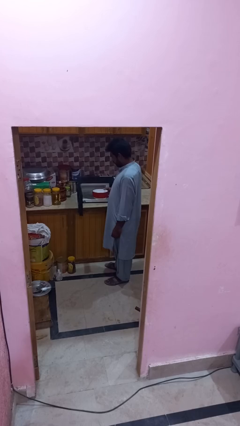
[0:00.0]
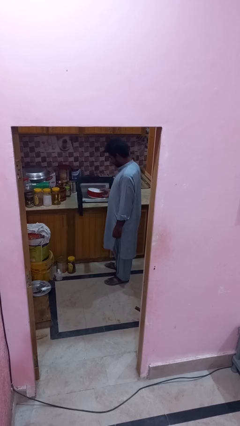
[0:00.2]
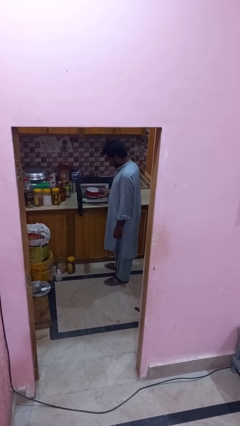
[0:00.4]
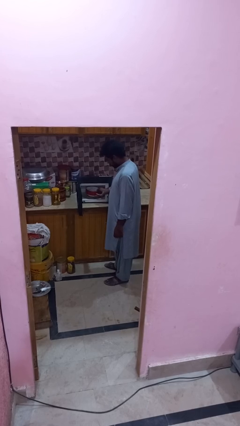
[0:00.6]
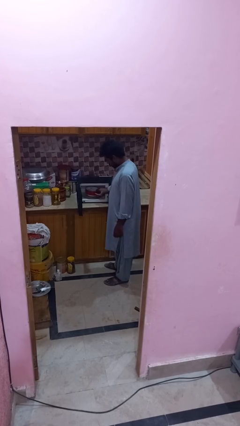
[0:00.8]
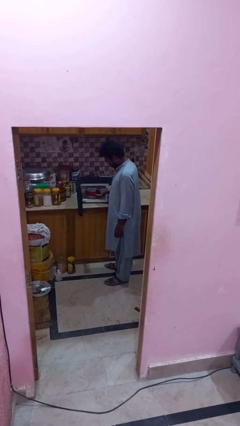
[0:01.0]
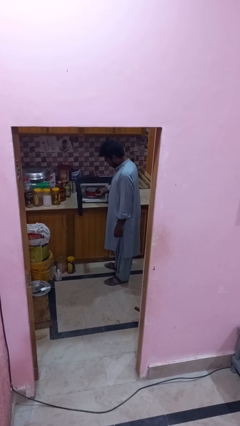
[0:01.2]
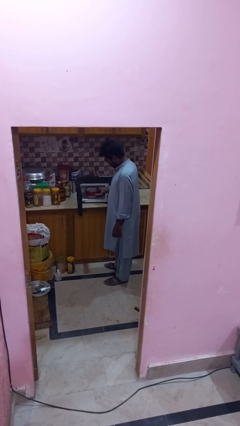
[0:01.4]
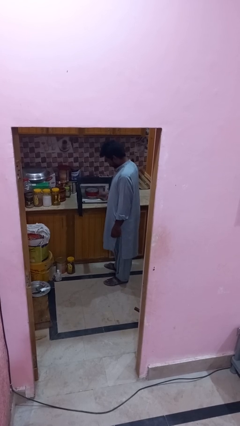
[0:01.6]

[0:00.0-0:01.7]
person puts object into microwave

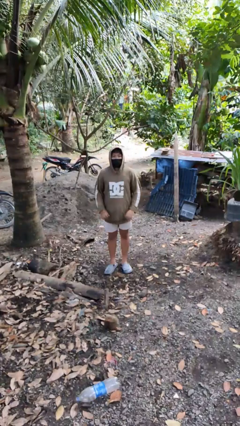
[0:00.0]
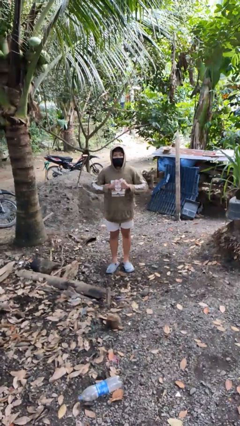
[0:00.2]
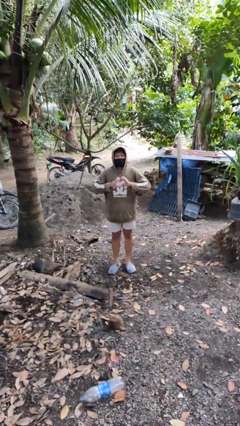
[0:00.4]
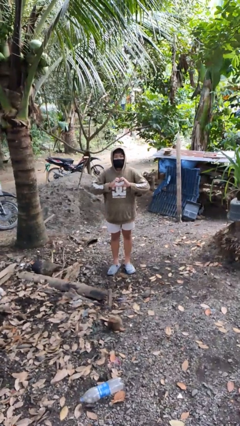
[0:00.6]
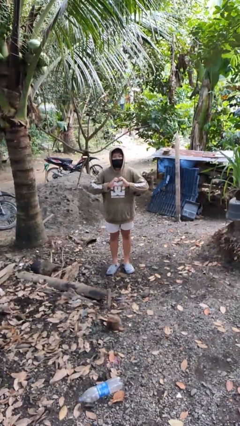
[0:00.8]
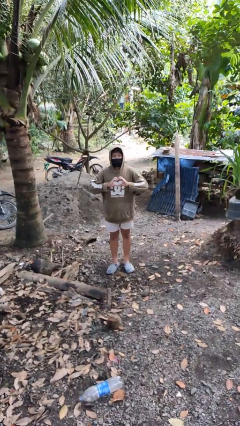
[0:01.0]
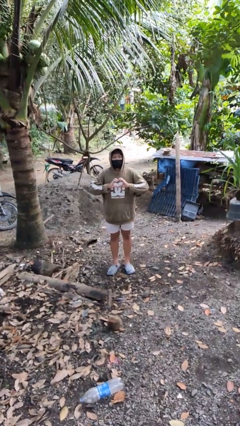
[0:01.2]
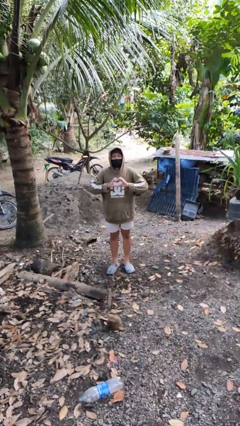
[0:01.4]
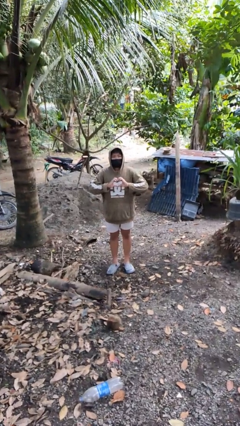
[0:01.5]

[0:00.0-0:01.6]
person gestures heart

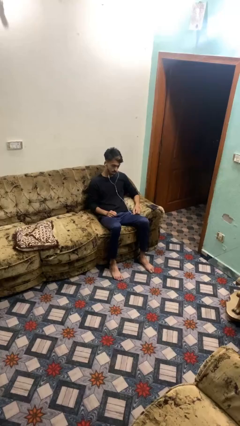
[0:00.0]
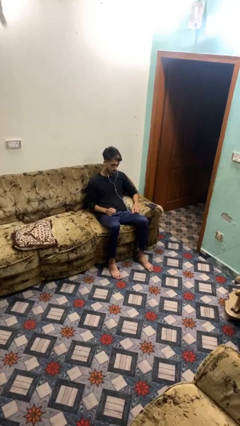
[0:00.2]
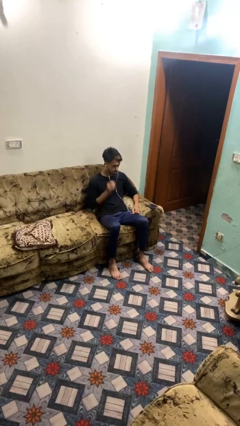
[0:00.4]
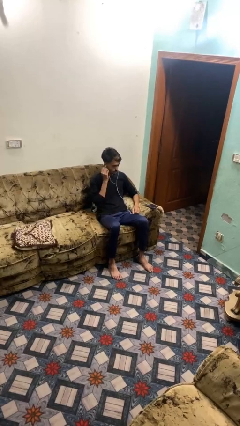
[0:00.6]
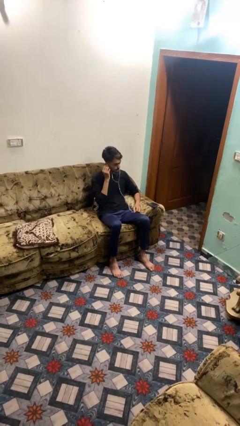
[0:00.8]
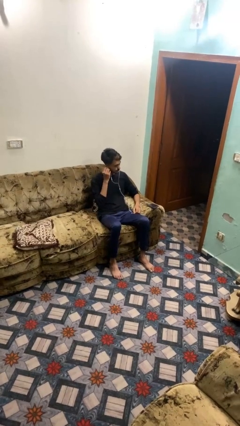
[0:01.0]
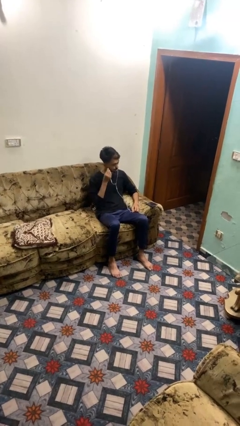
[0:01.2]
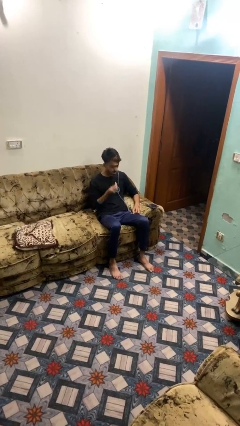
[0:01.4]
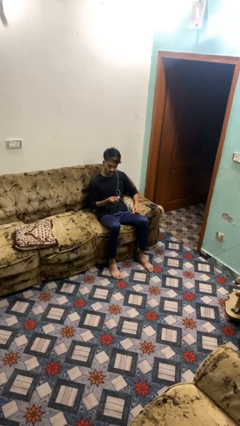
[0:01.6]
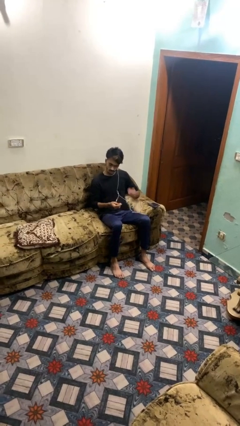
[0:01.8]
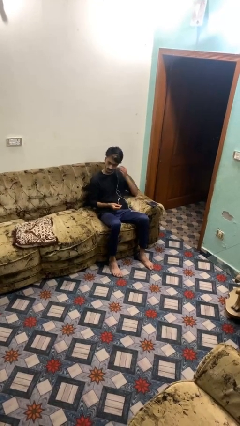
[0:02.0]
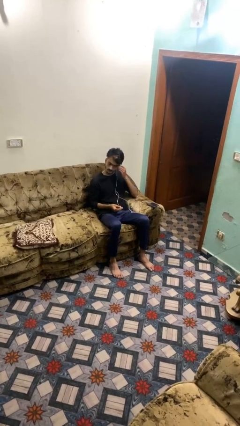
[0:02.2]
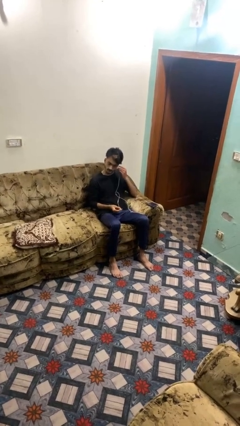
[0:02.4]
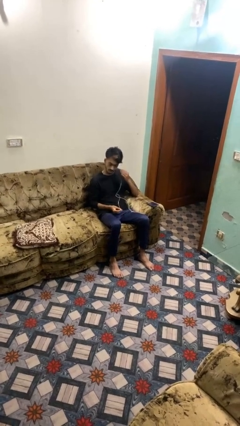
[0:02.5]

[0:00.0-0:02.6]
person takes off headphones

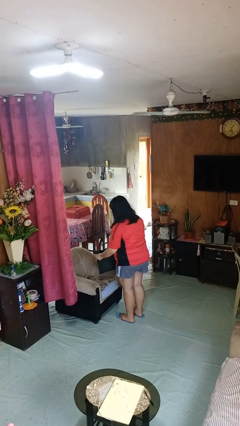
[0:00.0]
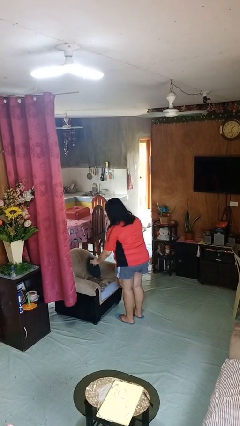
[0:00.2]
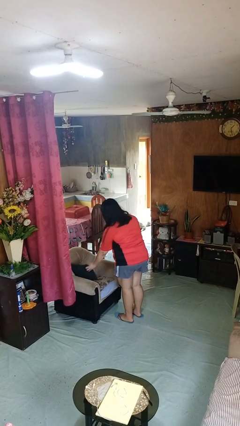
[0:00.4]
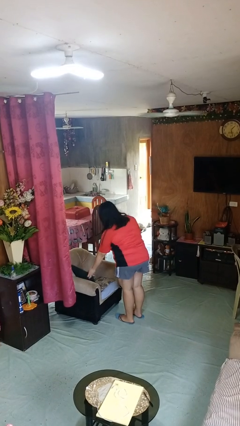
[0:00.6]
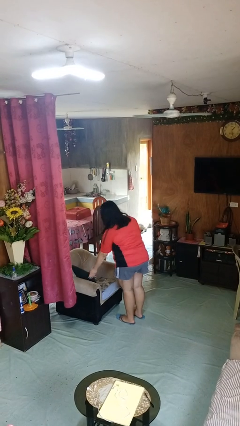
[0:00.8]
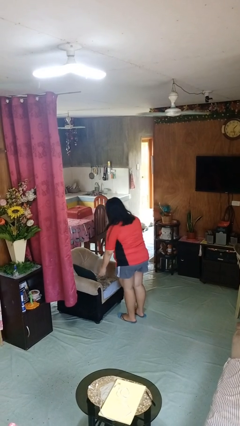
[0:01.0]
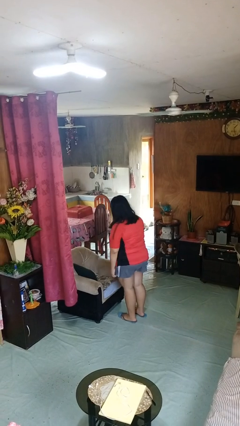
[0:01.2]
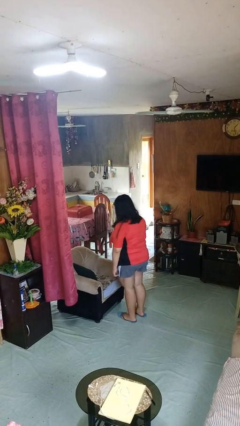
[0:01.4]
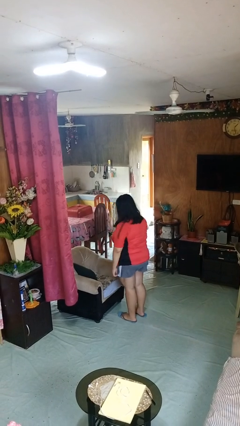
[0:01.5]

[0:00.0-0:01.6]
person puts down object on couch

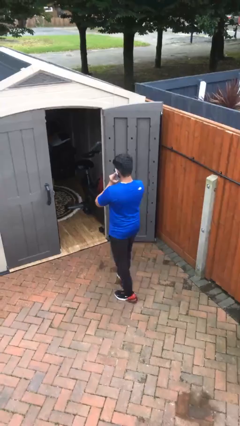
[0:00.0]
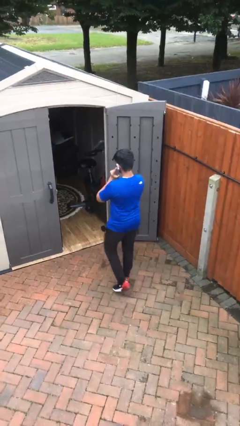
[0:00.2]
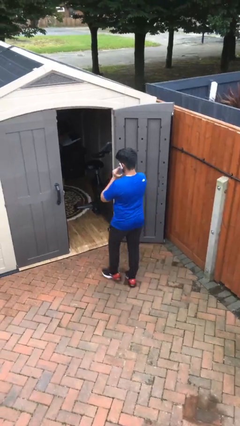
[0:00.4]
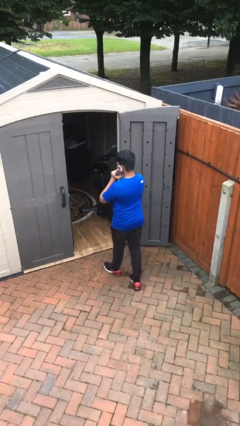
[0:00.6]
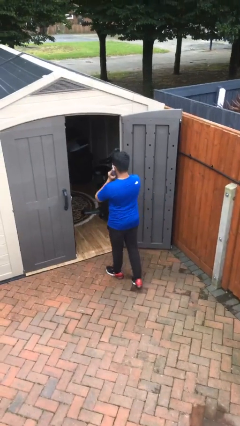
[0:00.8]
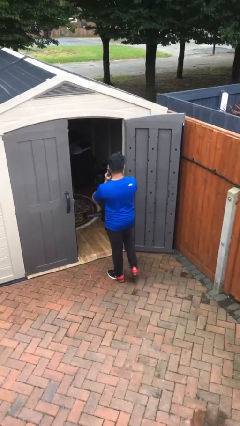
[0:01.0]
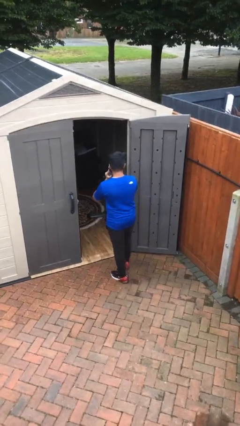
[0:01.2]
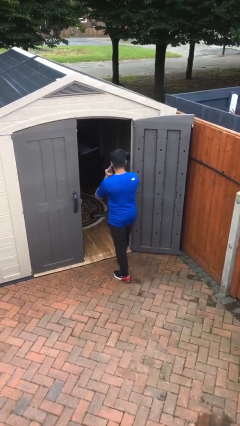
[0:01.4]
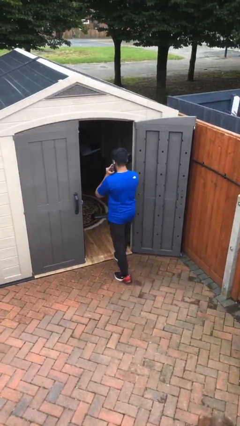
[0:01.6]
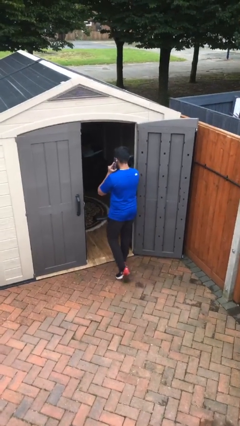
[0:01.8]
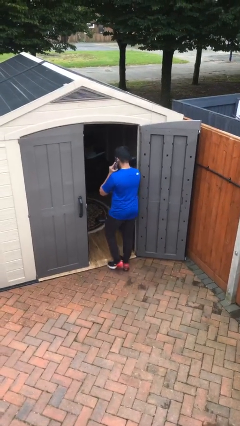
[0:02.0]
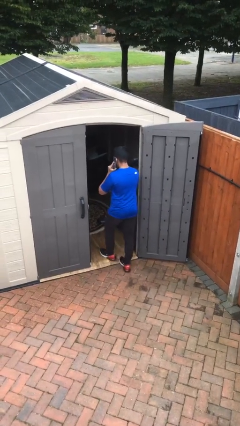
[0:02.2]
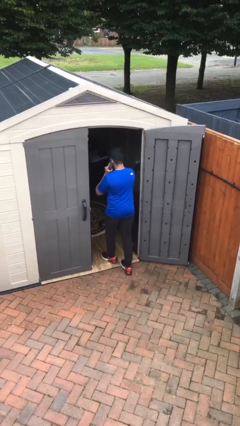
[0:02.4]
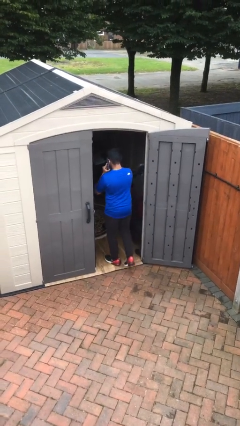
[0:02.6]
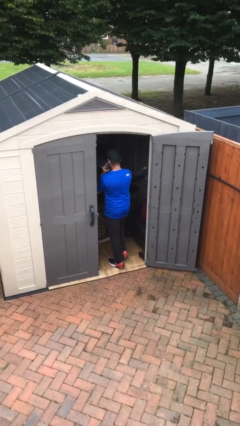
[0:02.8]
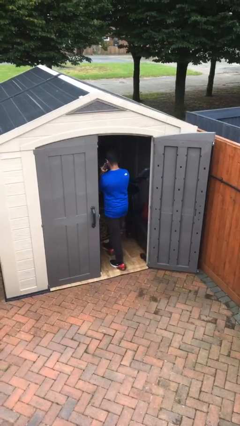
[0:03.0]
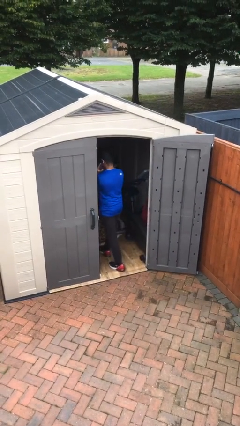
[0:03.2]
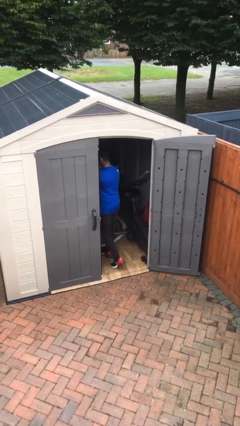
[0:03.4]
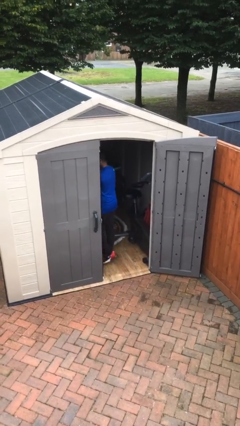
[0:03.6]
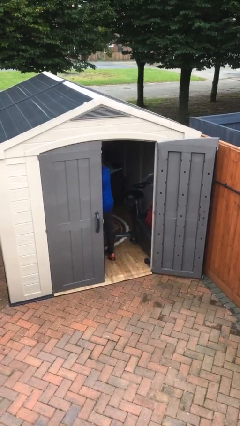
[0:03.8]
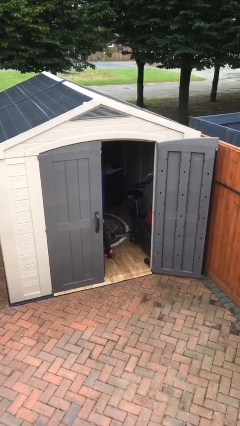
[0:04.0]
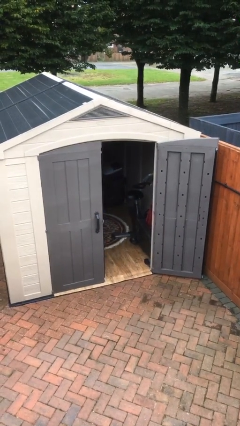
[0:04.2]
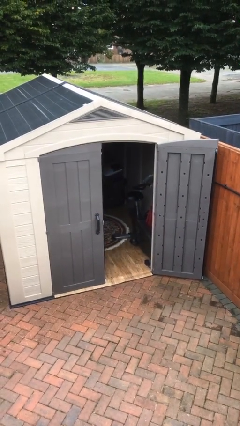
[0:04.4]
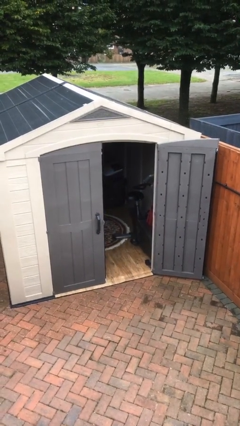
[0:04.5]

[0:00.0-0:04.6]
person exits scene through structure

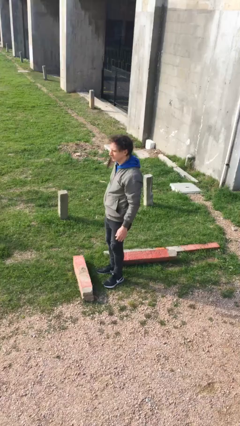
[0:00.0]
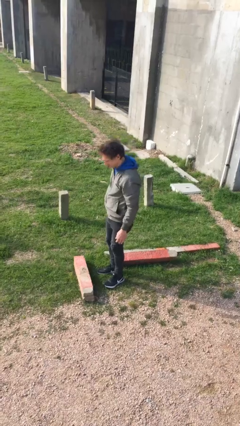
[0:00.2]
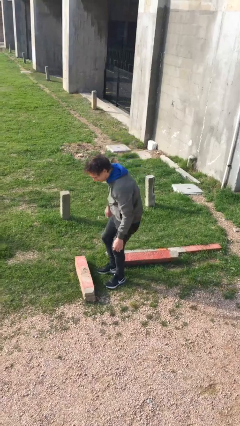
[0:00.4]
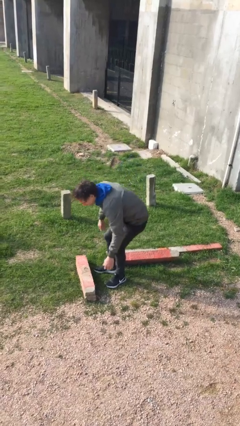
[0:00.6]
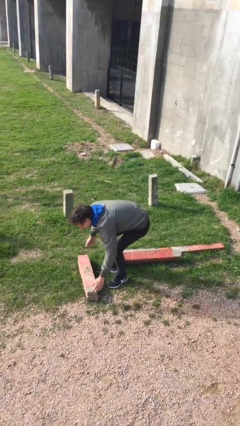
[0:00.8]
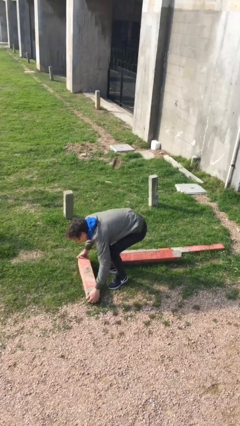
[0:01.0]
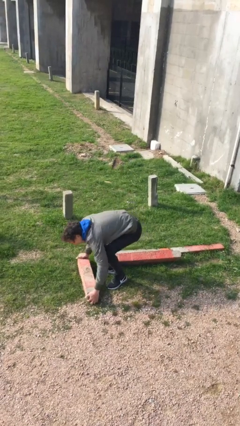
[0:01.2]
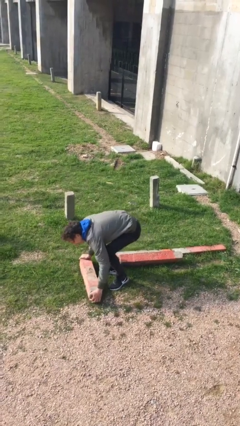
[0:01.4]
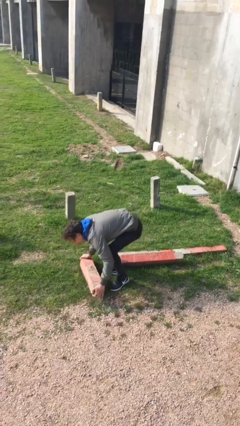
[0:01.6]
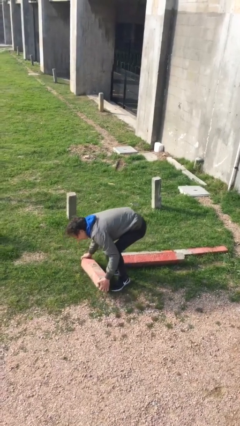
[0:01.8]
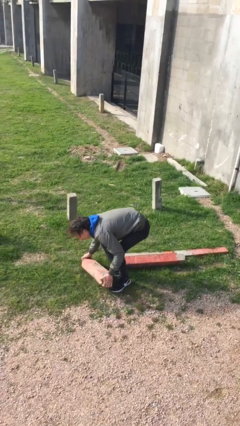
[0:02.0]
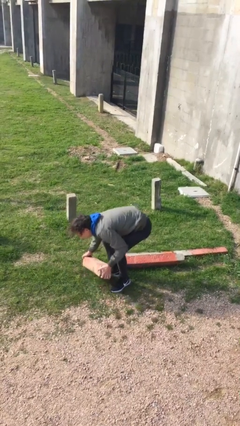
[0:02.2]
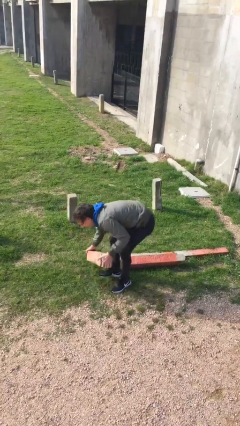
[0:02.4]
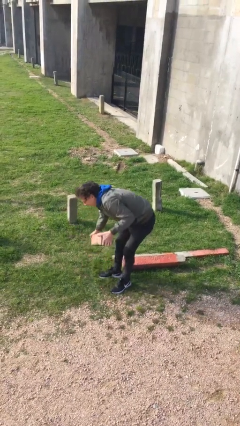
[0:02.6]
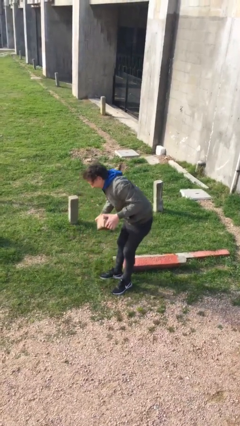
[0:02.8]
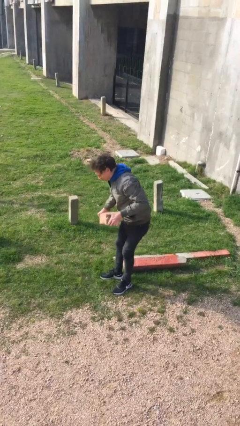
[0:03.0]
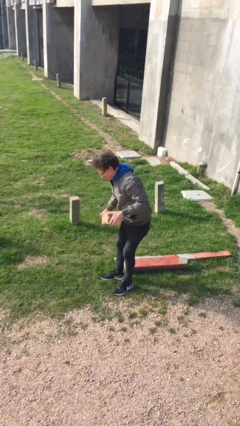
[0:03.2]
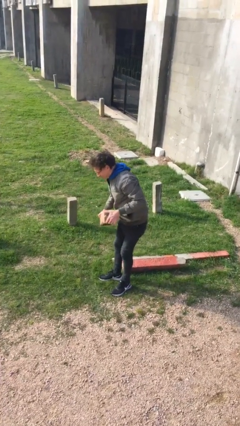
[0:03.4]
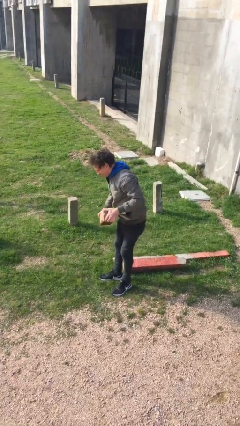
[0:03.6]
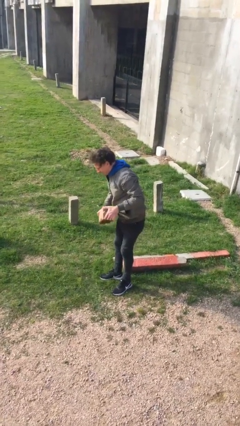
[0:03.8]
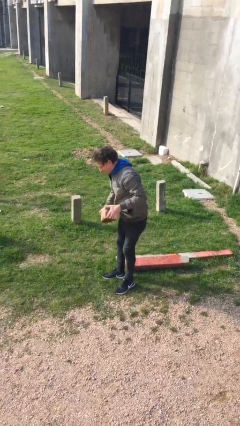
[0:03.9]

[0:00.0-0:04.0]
person picks up object from floor

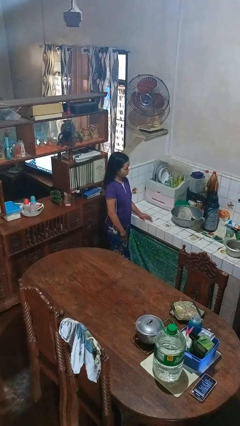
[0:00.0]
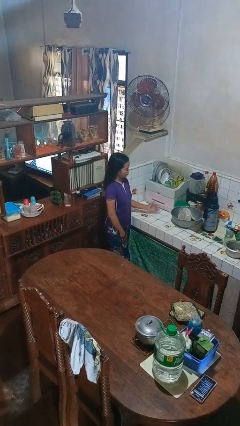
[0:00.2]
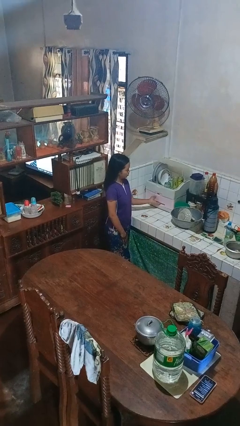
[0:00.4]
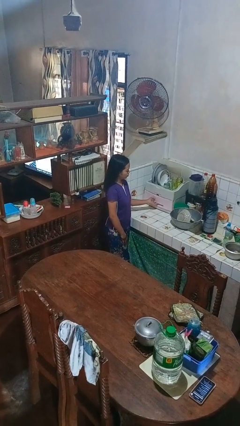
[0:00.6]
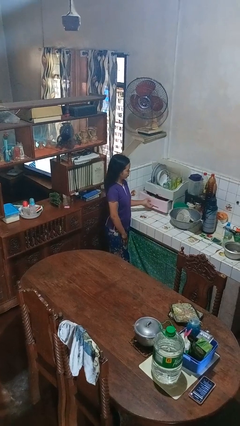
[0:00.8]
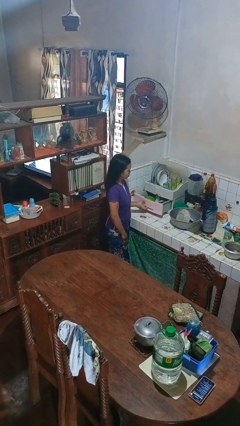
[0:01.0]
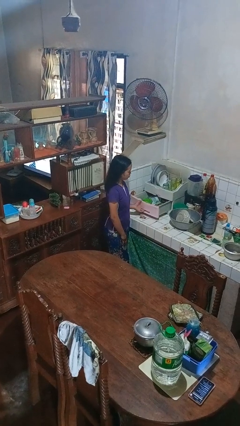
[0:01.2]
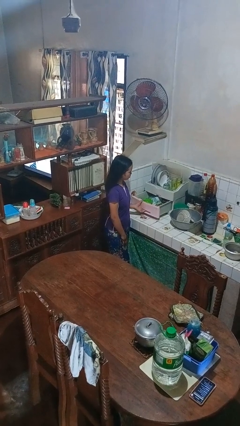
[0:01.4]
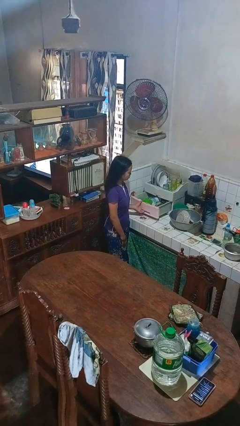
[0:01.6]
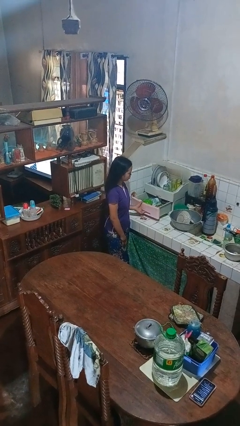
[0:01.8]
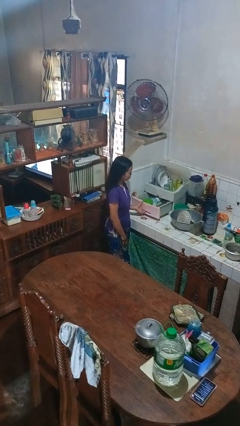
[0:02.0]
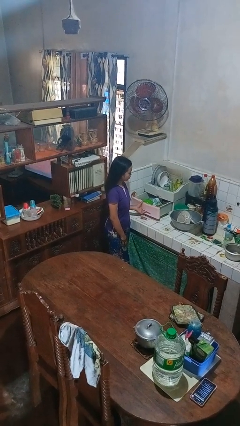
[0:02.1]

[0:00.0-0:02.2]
person opens kitchen drawer
